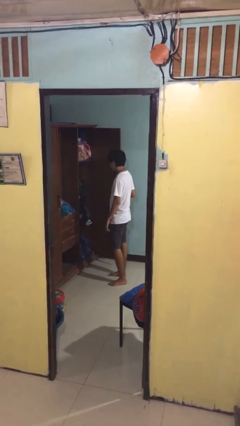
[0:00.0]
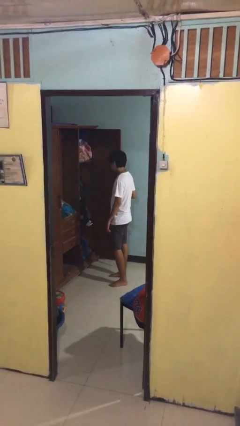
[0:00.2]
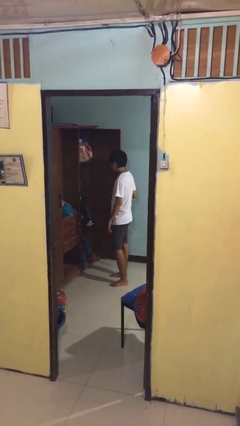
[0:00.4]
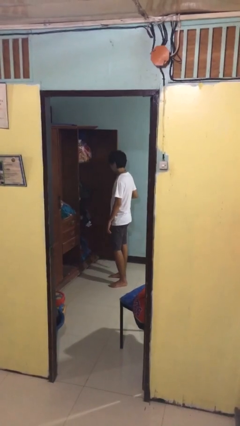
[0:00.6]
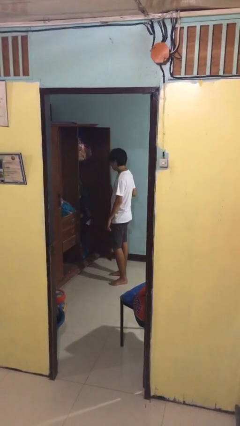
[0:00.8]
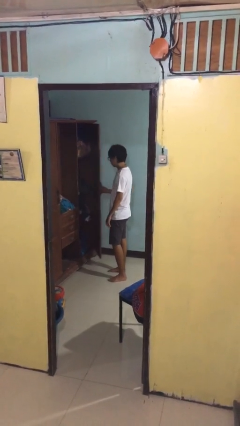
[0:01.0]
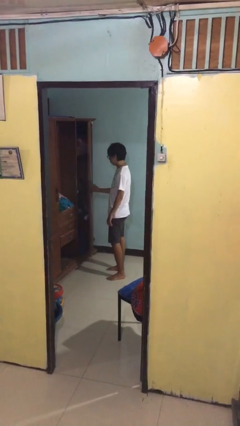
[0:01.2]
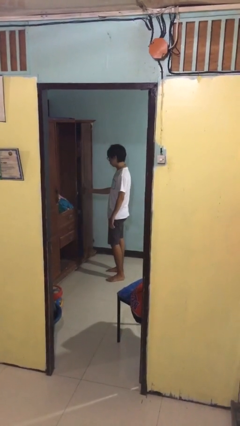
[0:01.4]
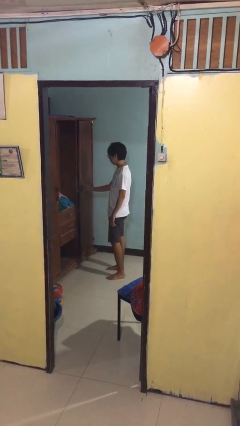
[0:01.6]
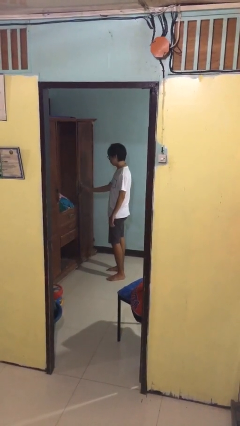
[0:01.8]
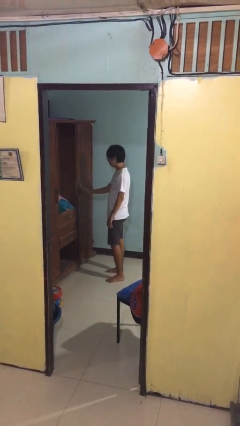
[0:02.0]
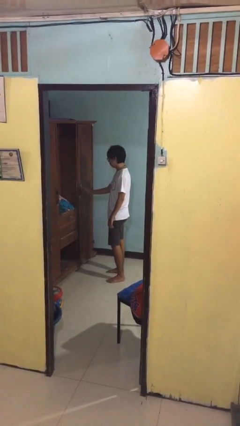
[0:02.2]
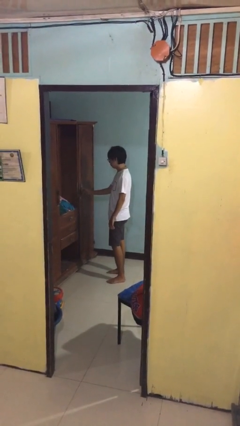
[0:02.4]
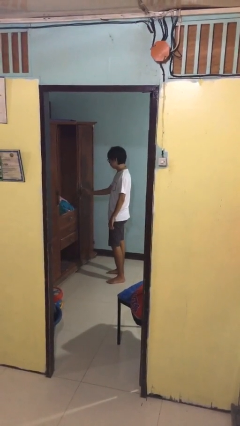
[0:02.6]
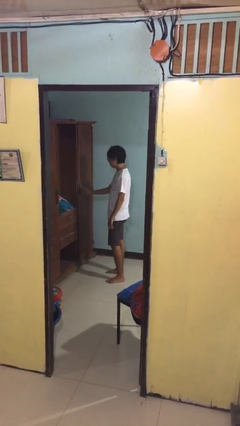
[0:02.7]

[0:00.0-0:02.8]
person closes closet door

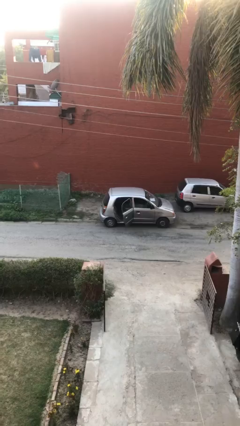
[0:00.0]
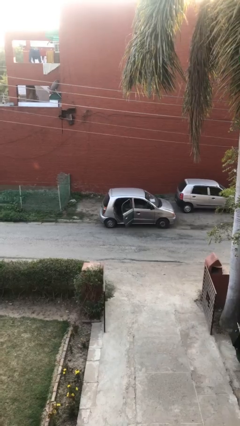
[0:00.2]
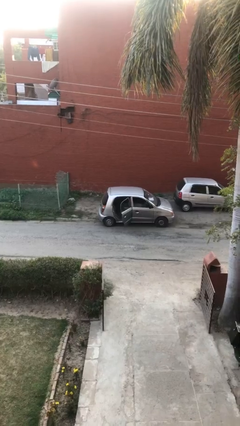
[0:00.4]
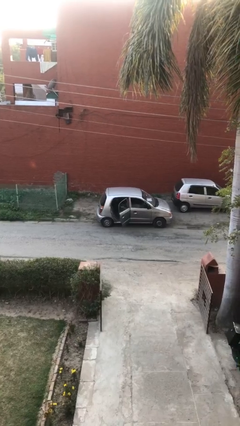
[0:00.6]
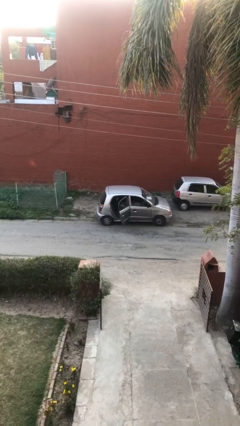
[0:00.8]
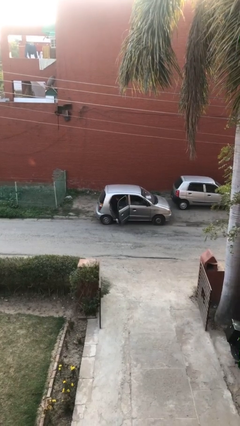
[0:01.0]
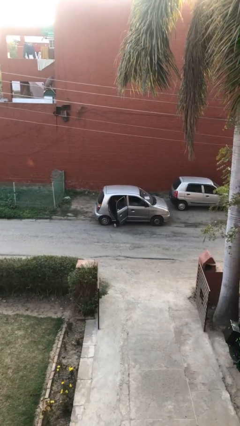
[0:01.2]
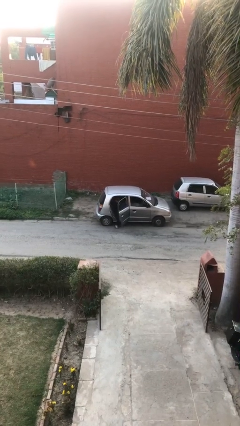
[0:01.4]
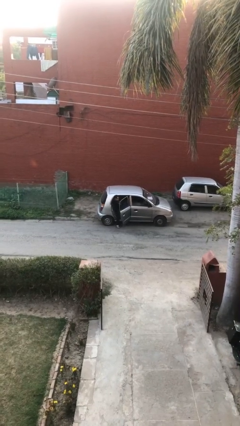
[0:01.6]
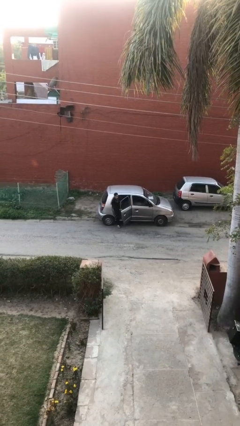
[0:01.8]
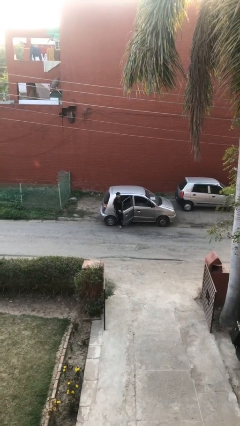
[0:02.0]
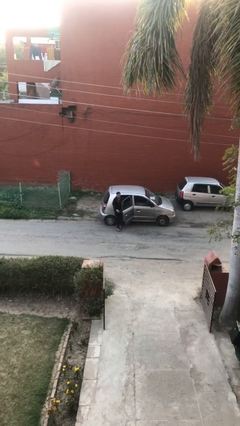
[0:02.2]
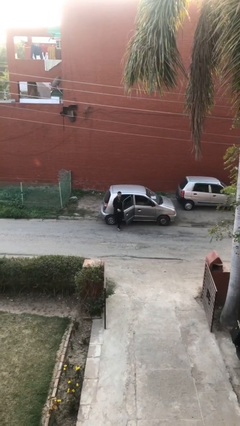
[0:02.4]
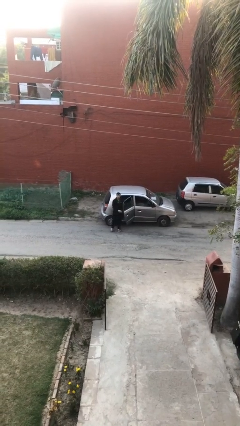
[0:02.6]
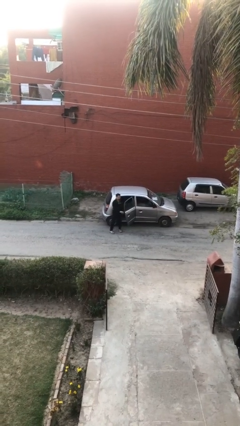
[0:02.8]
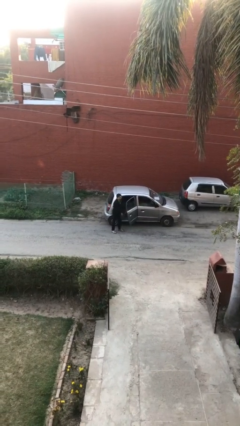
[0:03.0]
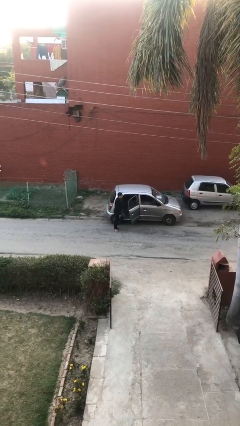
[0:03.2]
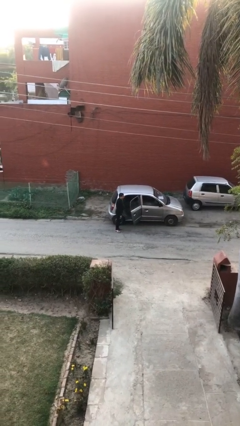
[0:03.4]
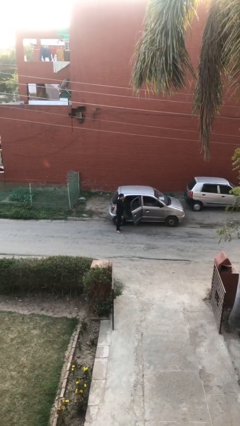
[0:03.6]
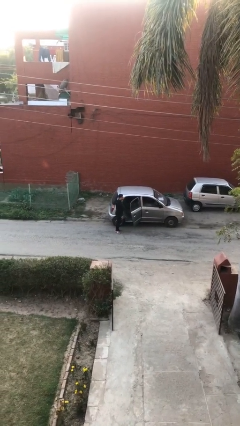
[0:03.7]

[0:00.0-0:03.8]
person exits car

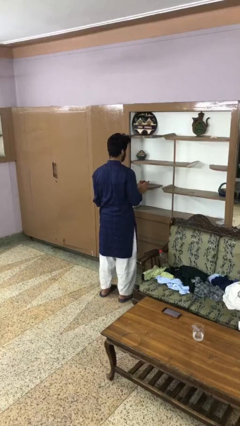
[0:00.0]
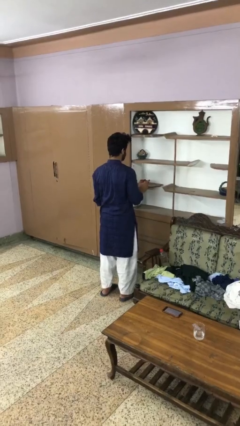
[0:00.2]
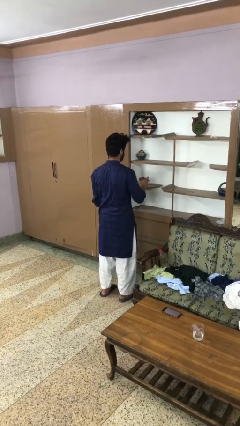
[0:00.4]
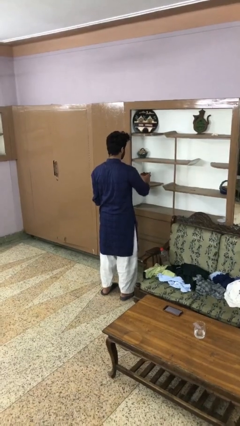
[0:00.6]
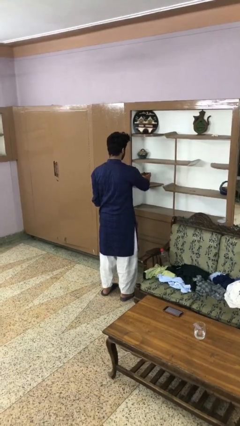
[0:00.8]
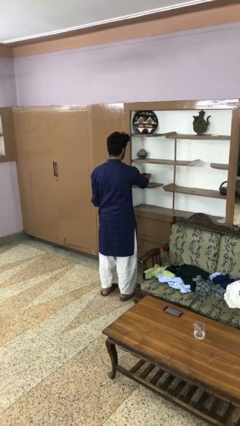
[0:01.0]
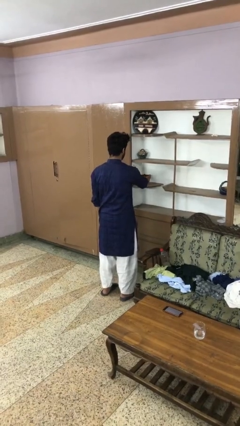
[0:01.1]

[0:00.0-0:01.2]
person puts down object on shelf

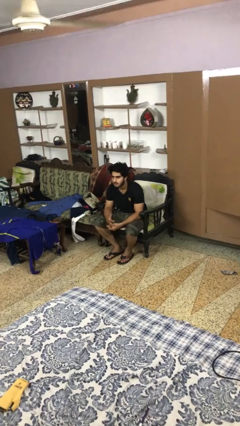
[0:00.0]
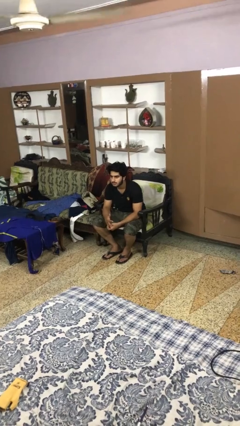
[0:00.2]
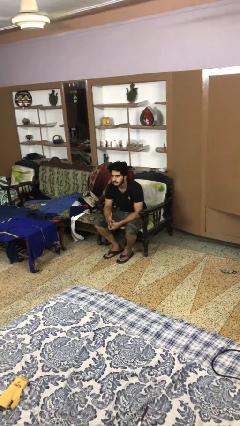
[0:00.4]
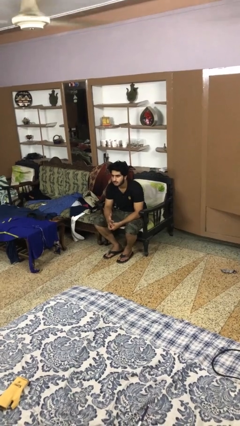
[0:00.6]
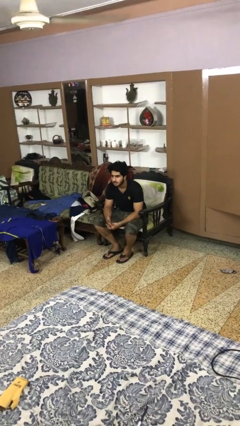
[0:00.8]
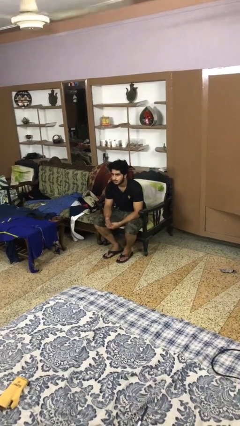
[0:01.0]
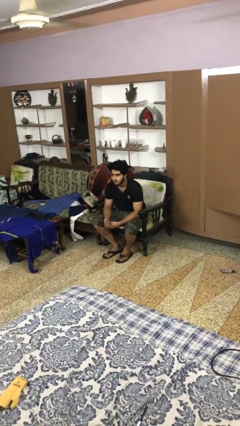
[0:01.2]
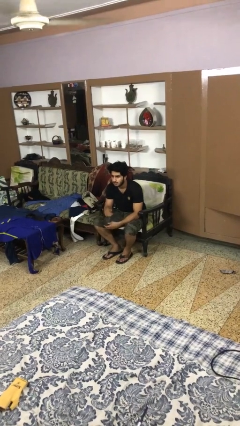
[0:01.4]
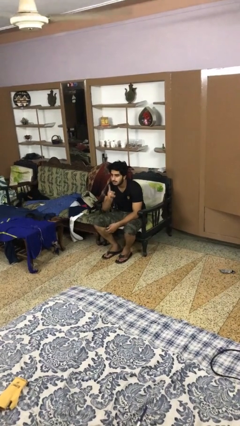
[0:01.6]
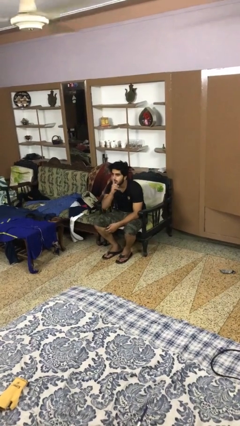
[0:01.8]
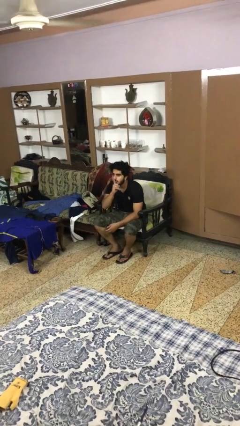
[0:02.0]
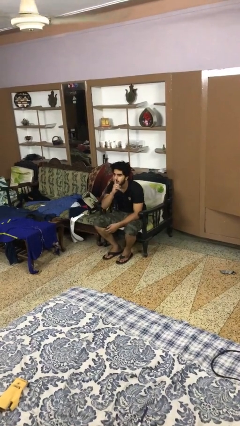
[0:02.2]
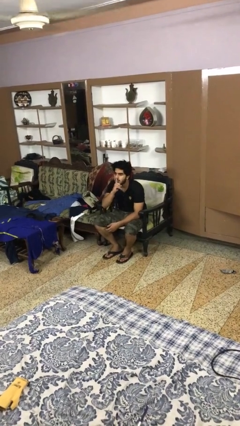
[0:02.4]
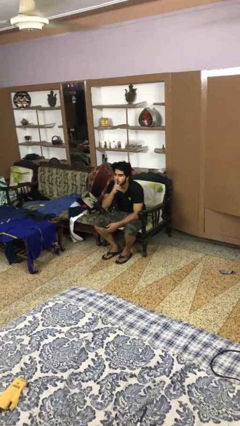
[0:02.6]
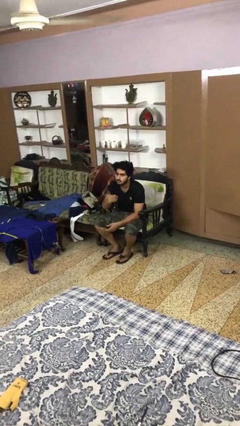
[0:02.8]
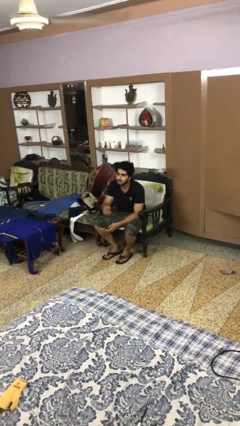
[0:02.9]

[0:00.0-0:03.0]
person gestures be quiet

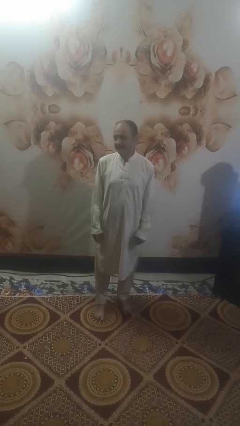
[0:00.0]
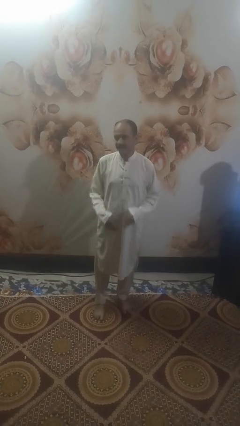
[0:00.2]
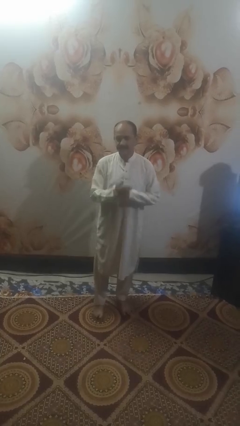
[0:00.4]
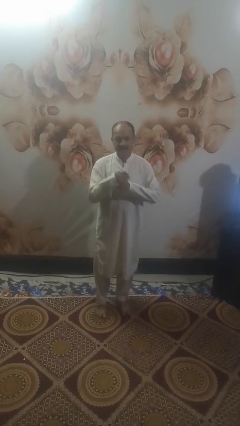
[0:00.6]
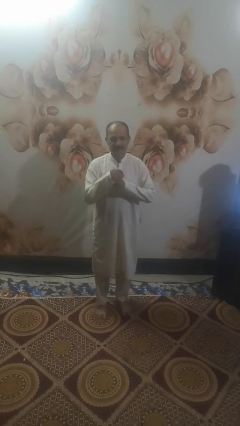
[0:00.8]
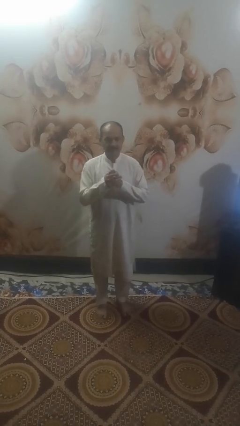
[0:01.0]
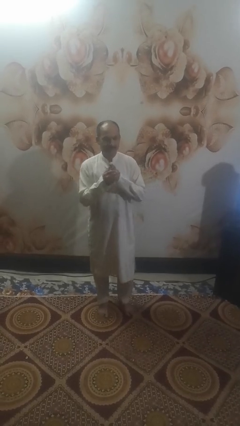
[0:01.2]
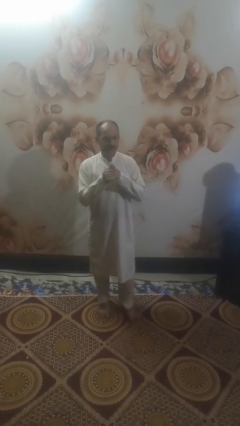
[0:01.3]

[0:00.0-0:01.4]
person cracks knuckles

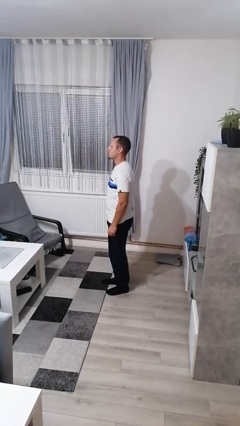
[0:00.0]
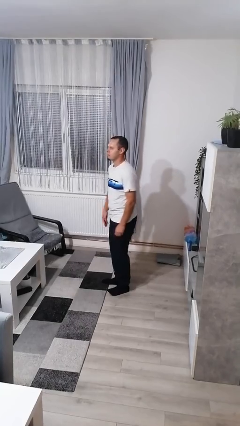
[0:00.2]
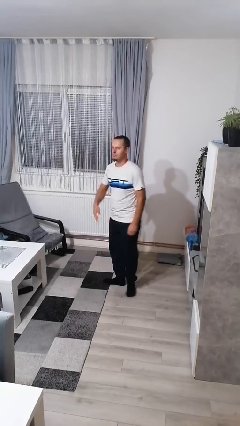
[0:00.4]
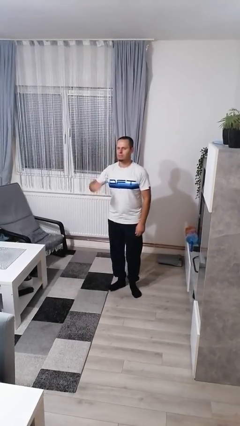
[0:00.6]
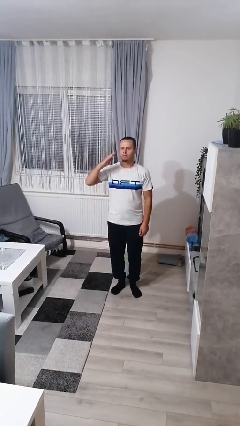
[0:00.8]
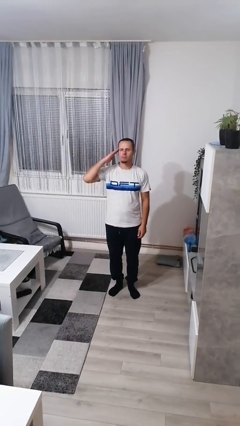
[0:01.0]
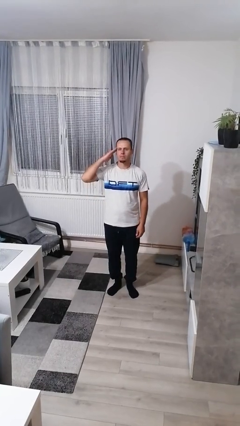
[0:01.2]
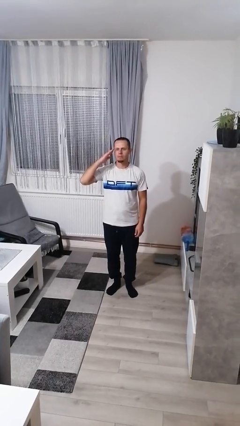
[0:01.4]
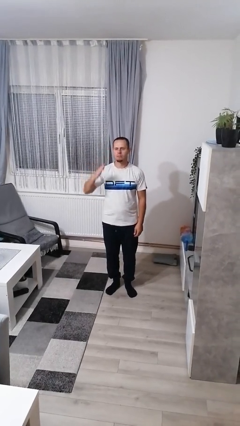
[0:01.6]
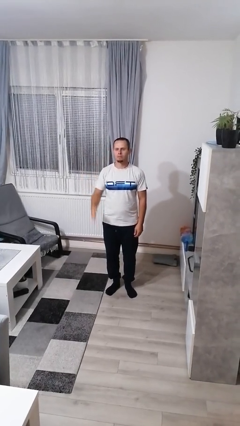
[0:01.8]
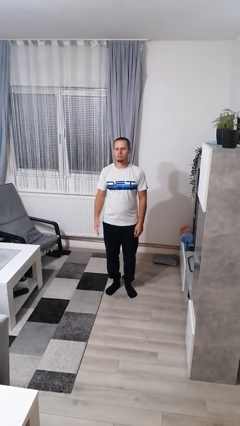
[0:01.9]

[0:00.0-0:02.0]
person salutes

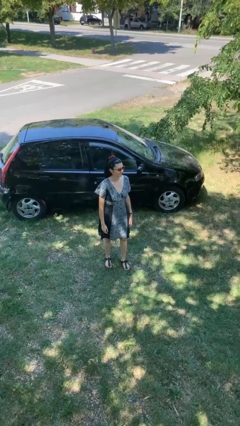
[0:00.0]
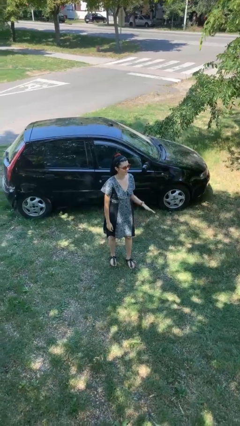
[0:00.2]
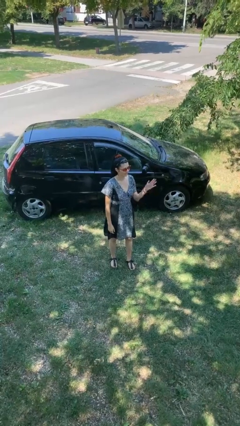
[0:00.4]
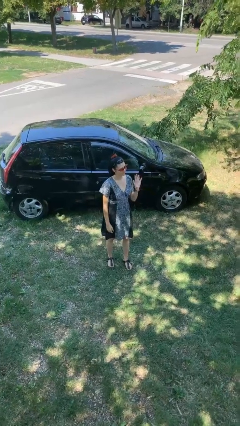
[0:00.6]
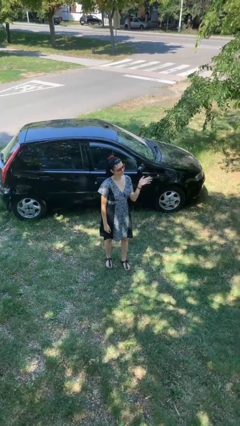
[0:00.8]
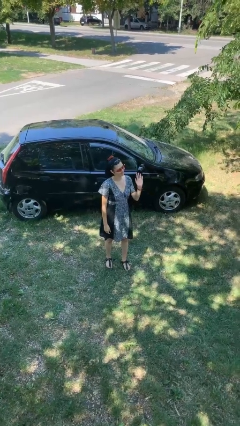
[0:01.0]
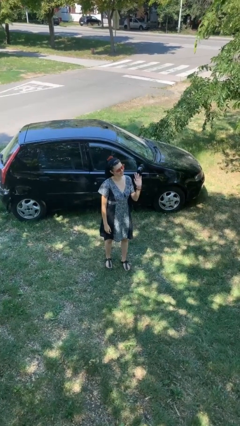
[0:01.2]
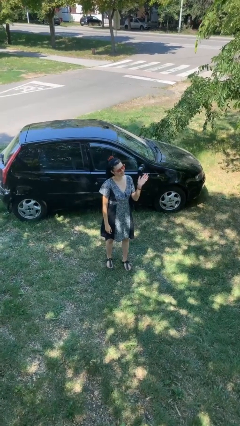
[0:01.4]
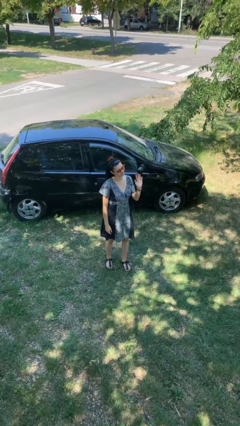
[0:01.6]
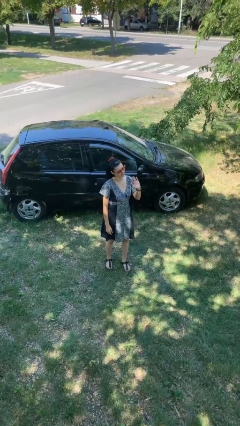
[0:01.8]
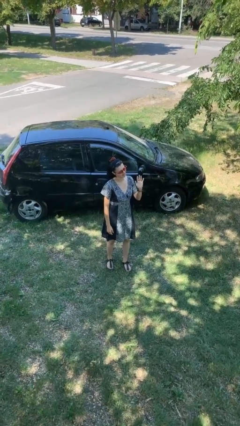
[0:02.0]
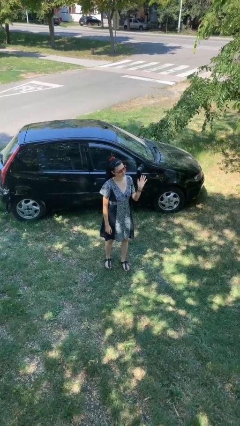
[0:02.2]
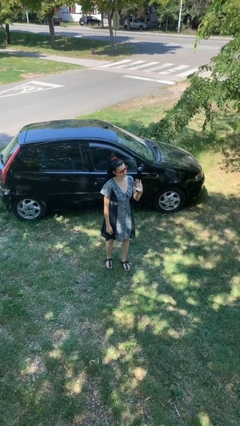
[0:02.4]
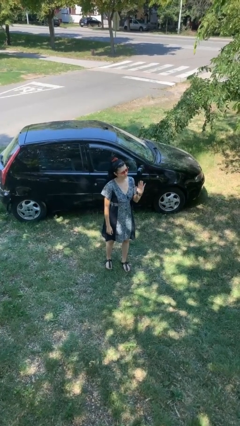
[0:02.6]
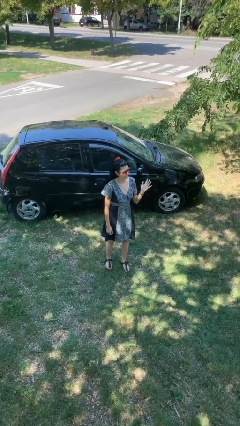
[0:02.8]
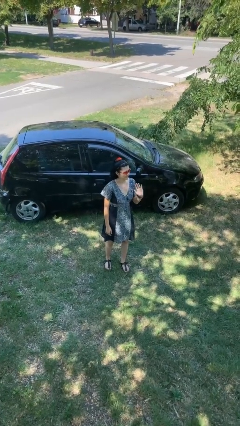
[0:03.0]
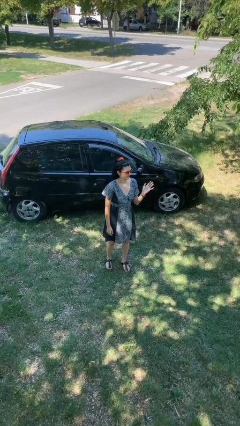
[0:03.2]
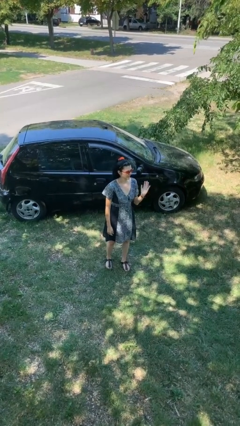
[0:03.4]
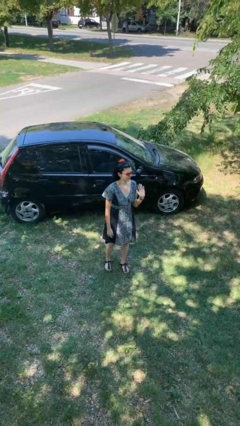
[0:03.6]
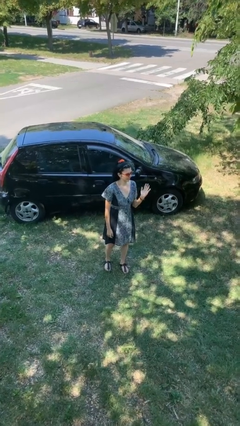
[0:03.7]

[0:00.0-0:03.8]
person waves at person
